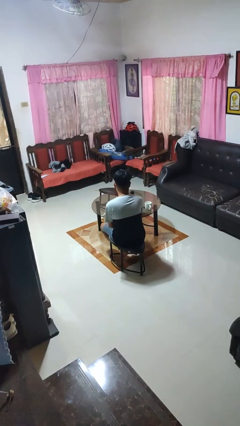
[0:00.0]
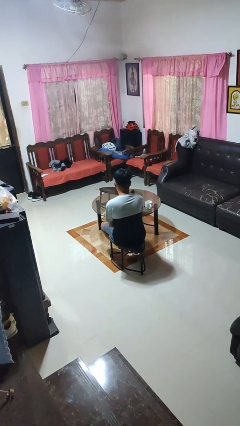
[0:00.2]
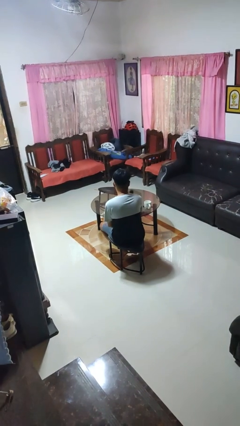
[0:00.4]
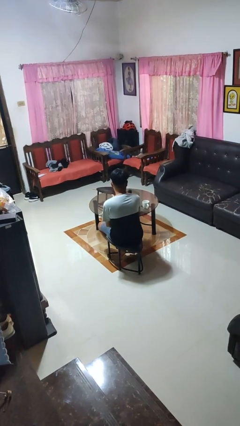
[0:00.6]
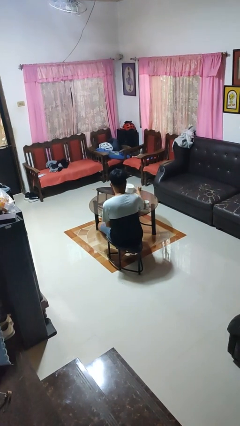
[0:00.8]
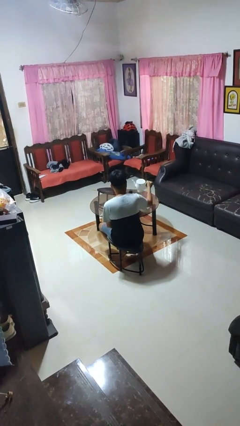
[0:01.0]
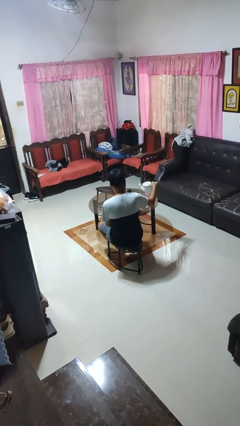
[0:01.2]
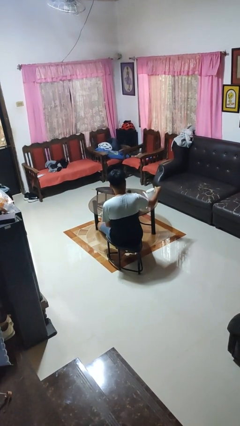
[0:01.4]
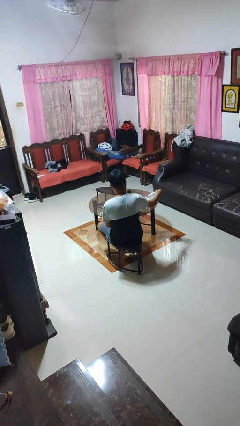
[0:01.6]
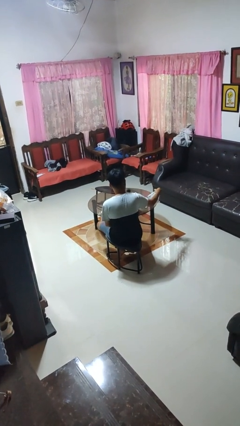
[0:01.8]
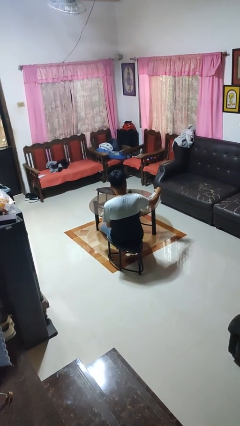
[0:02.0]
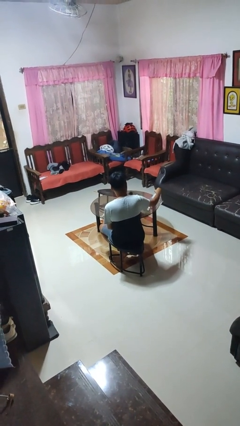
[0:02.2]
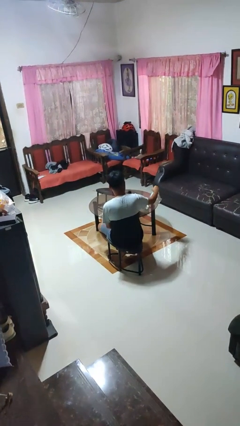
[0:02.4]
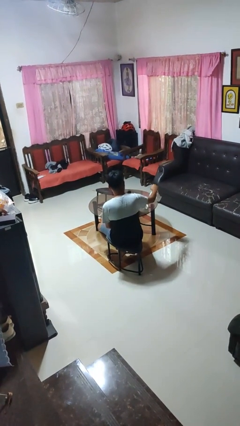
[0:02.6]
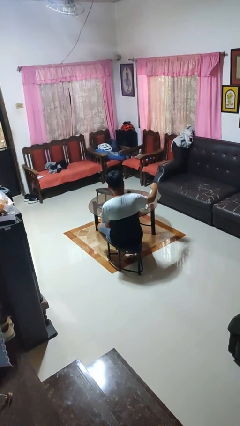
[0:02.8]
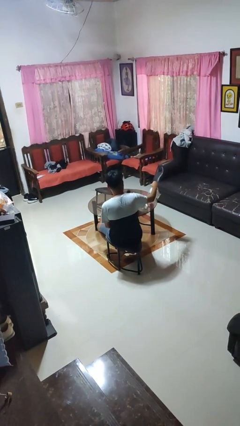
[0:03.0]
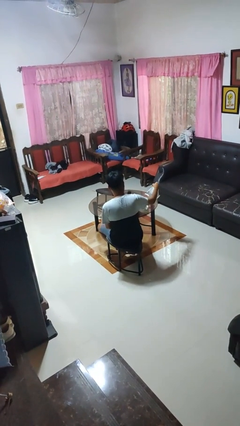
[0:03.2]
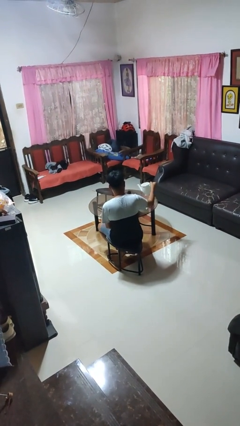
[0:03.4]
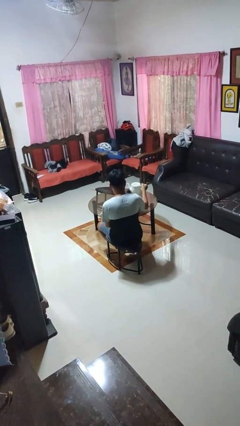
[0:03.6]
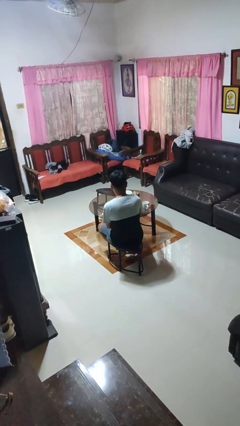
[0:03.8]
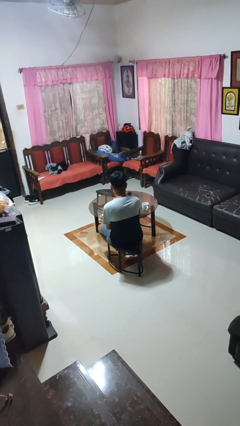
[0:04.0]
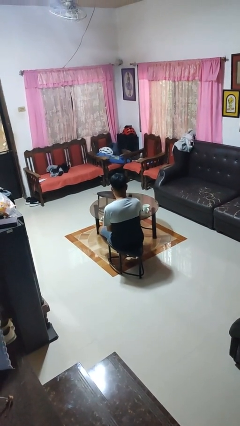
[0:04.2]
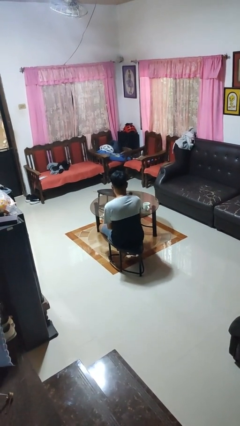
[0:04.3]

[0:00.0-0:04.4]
person pours coffee into mug

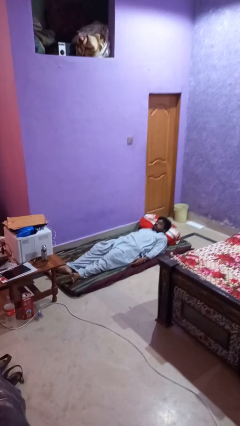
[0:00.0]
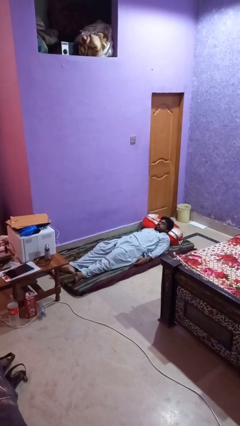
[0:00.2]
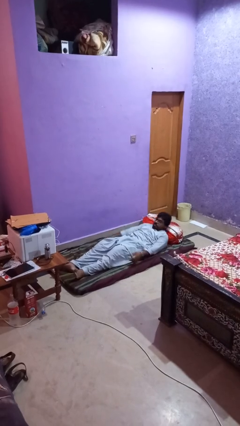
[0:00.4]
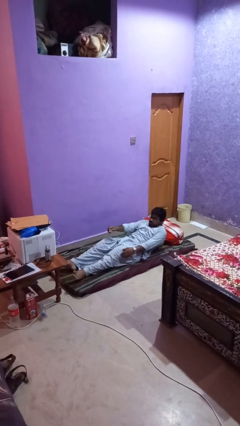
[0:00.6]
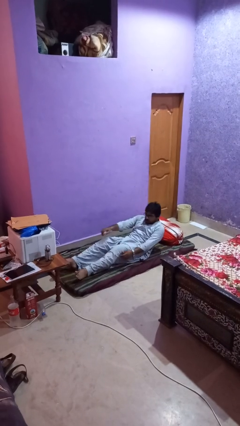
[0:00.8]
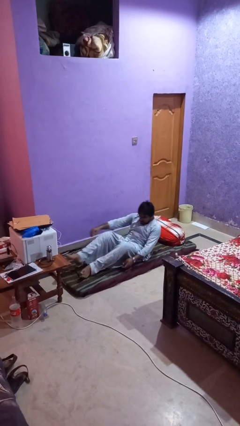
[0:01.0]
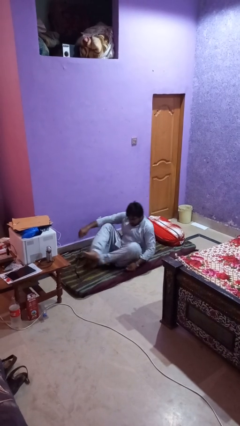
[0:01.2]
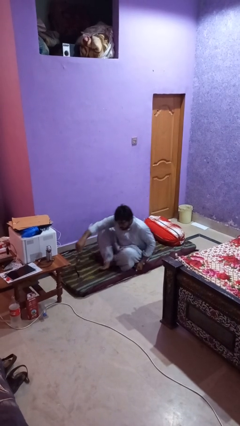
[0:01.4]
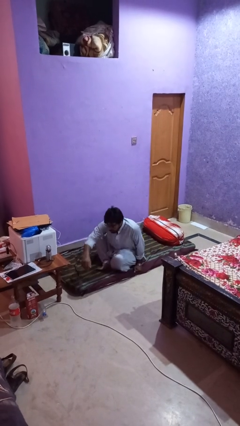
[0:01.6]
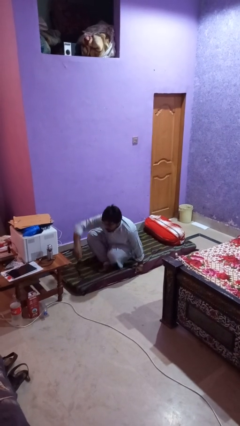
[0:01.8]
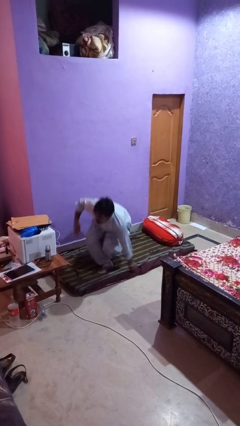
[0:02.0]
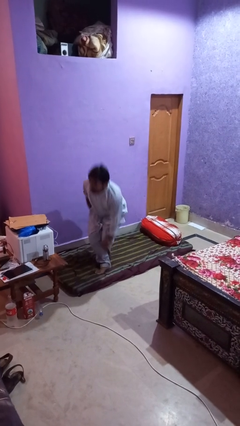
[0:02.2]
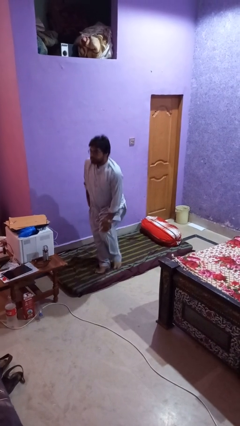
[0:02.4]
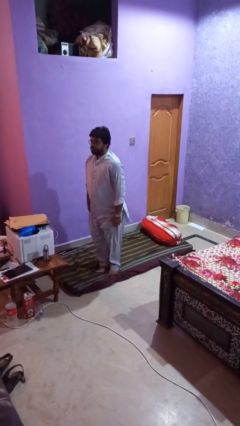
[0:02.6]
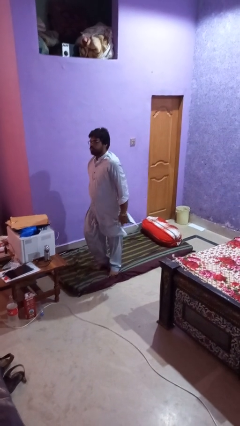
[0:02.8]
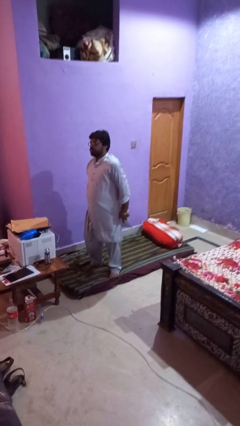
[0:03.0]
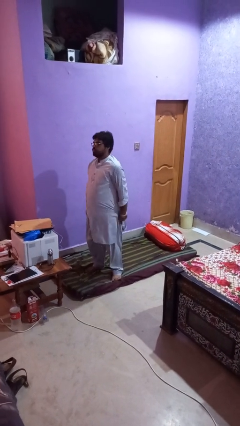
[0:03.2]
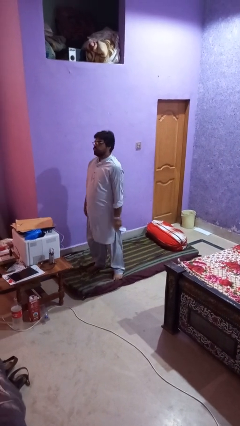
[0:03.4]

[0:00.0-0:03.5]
person stands up

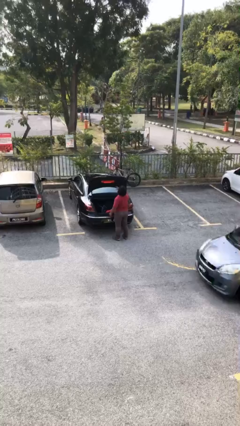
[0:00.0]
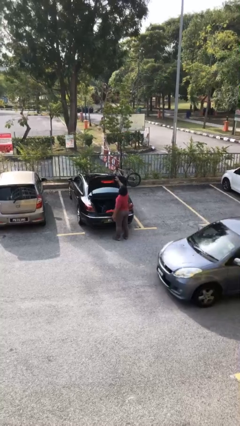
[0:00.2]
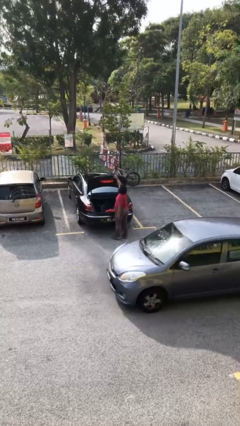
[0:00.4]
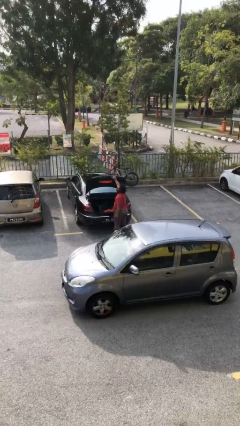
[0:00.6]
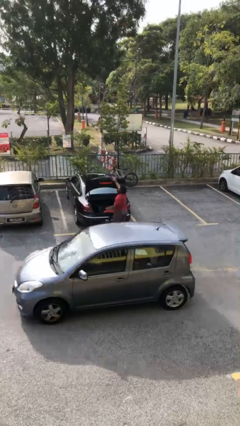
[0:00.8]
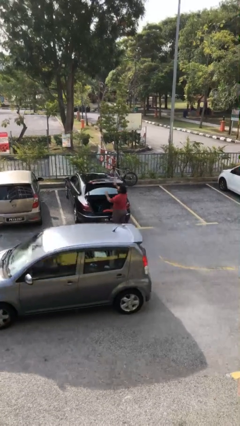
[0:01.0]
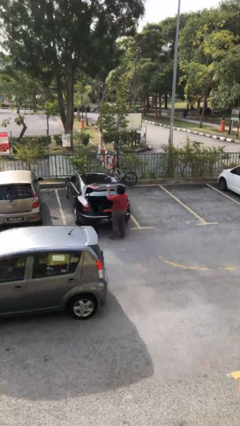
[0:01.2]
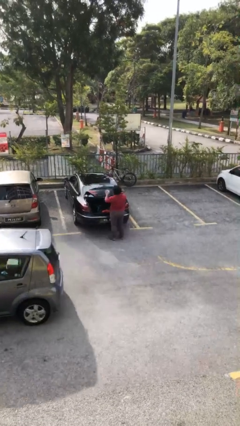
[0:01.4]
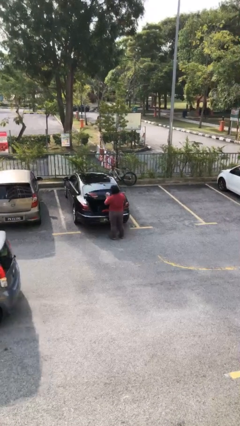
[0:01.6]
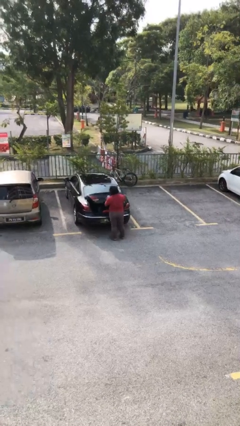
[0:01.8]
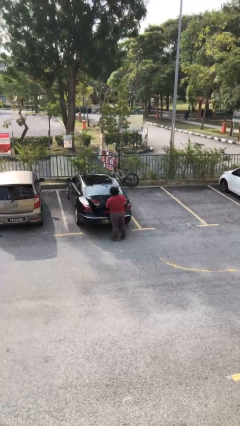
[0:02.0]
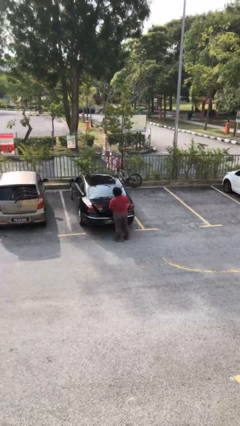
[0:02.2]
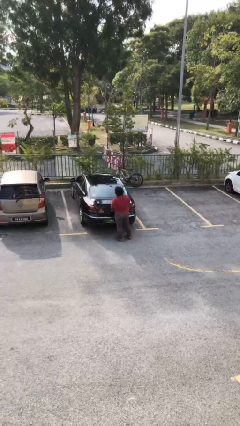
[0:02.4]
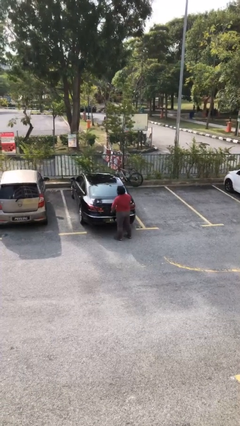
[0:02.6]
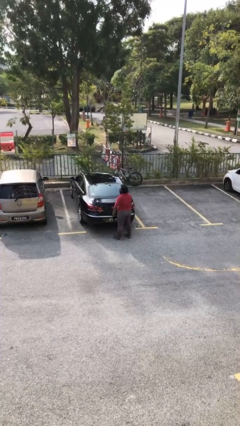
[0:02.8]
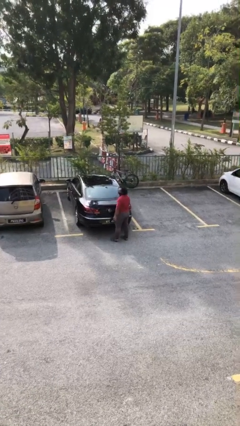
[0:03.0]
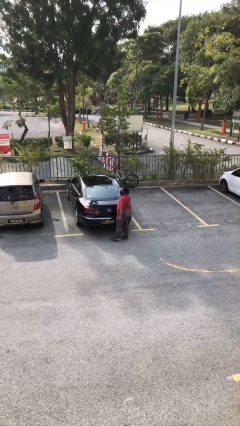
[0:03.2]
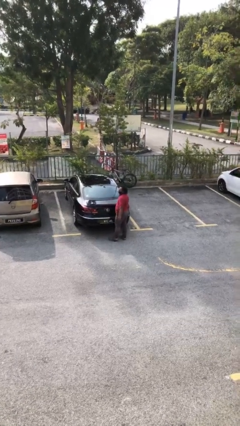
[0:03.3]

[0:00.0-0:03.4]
person closes car trunk

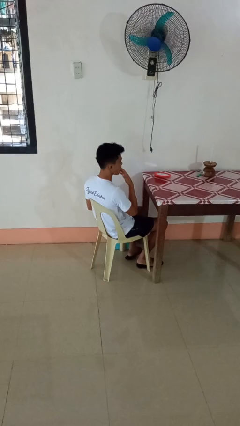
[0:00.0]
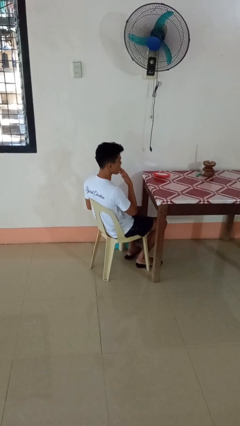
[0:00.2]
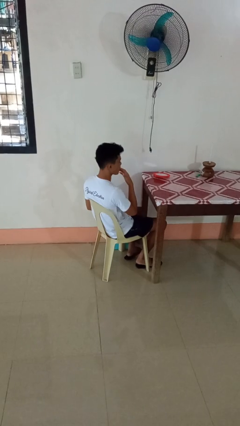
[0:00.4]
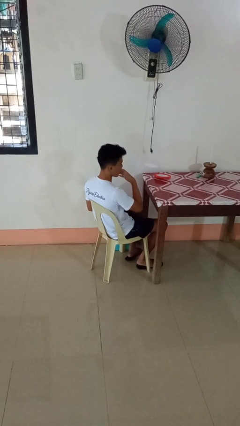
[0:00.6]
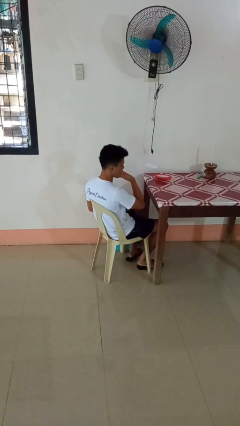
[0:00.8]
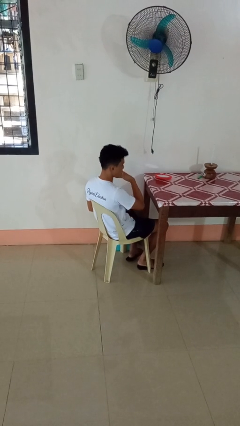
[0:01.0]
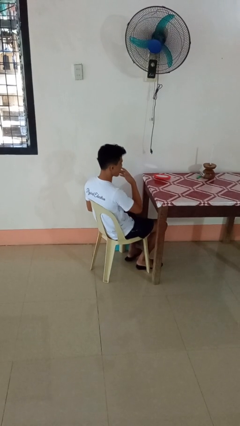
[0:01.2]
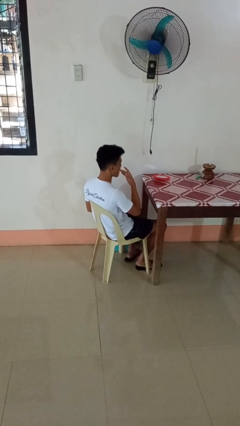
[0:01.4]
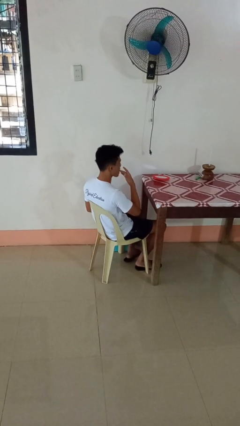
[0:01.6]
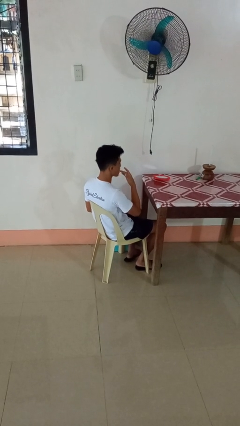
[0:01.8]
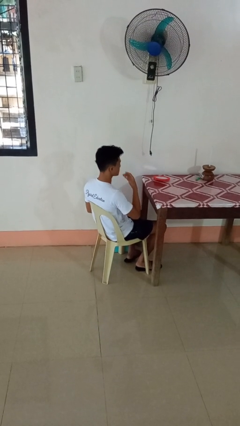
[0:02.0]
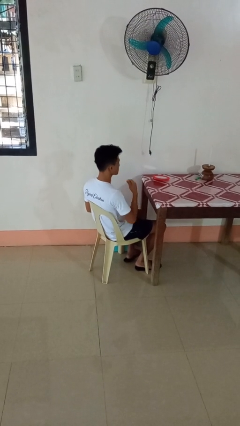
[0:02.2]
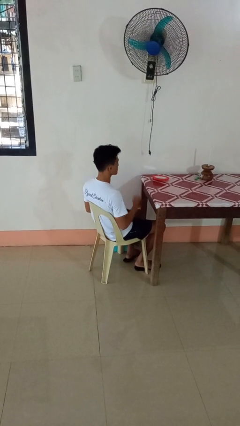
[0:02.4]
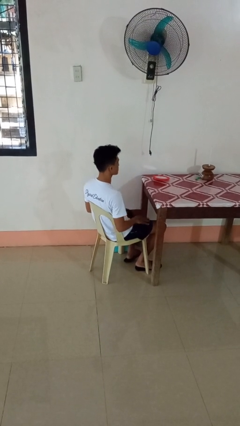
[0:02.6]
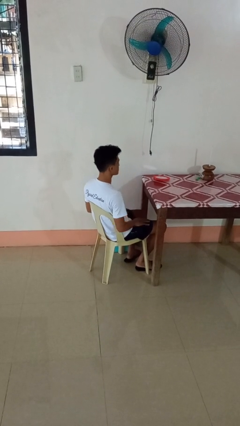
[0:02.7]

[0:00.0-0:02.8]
person licks fingers

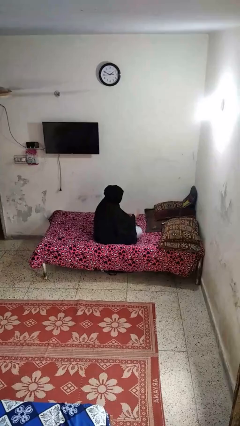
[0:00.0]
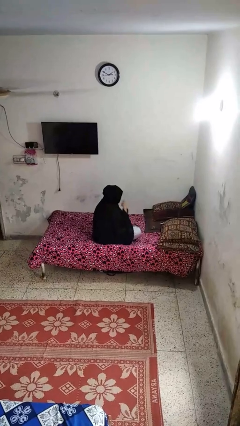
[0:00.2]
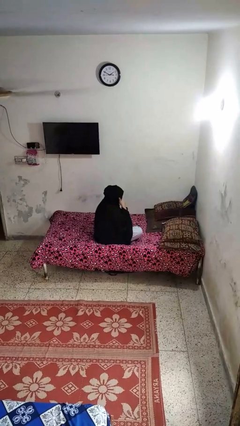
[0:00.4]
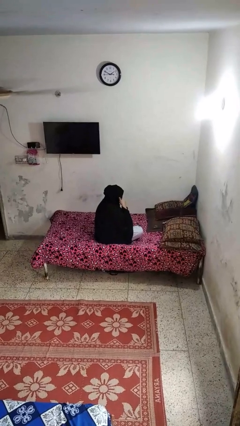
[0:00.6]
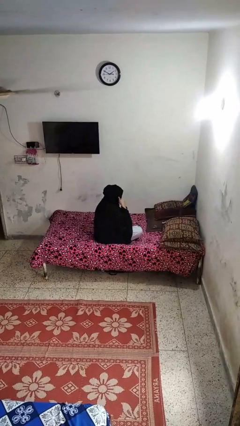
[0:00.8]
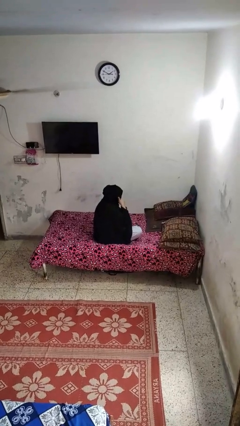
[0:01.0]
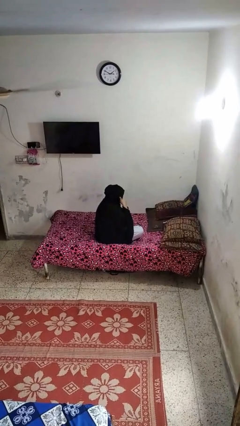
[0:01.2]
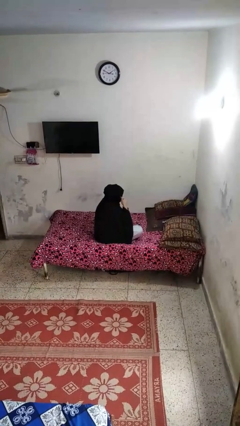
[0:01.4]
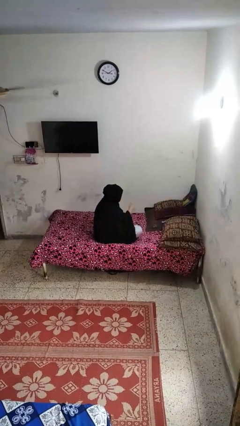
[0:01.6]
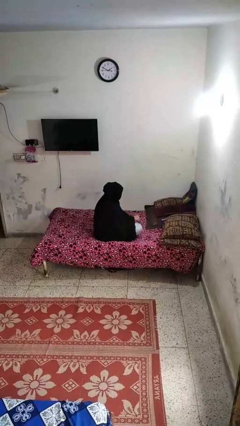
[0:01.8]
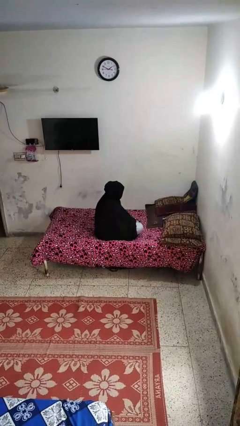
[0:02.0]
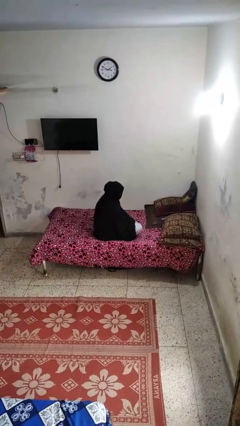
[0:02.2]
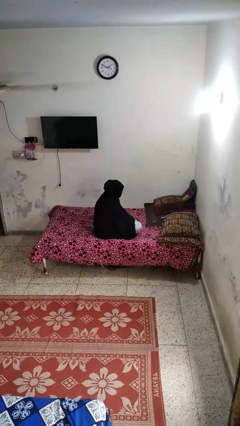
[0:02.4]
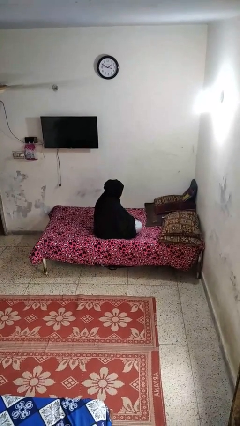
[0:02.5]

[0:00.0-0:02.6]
person gestures call me

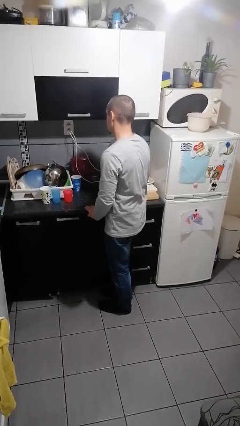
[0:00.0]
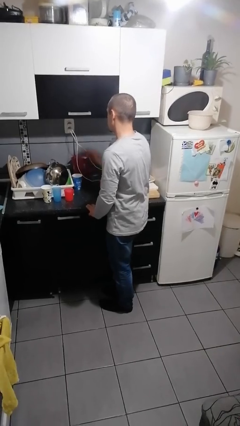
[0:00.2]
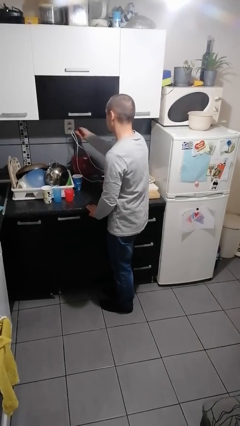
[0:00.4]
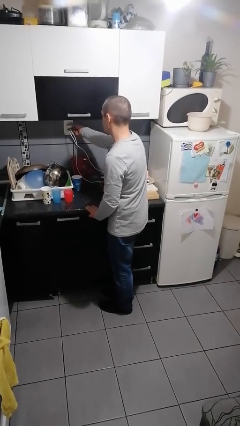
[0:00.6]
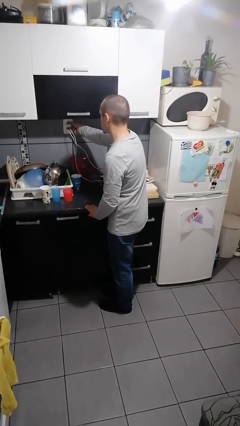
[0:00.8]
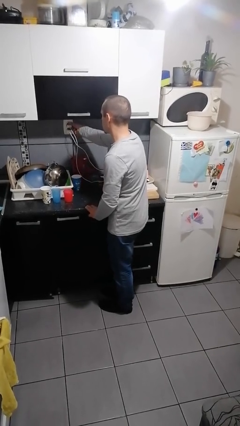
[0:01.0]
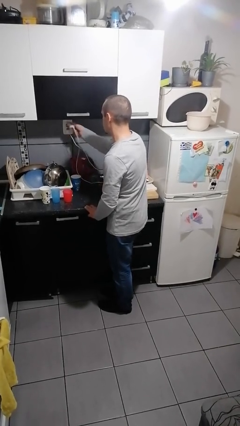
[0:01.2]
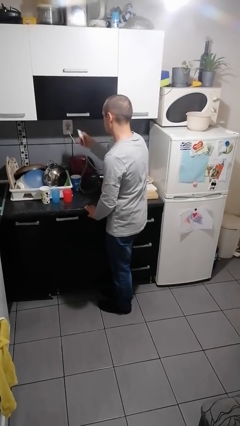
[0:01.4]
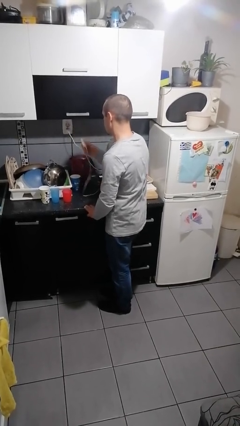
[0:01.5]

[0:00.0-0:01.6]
person unplugs from electrical socket
